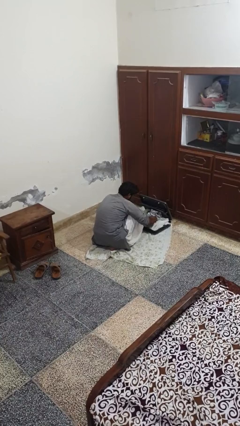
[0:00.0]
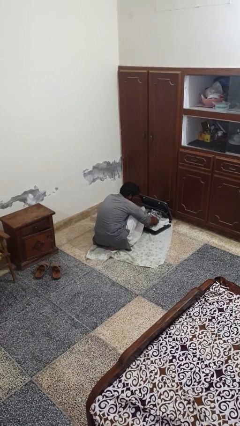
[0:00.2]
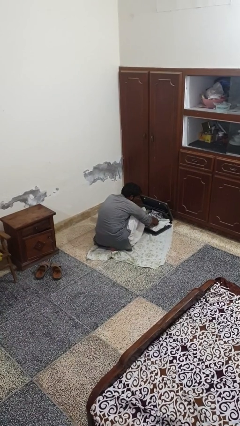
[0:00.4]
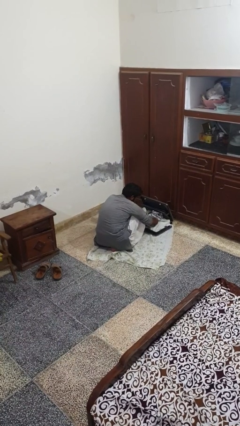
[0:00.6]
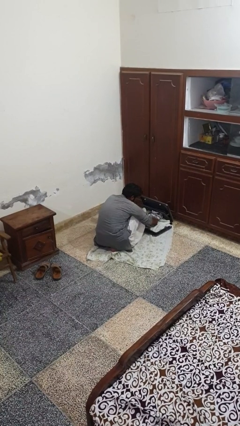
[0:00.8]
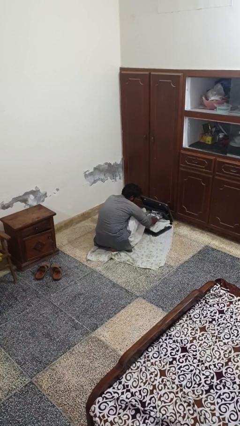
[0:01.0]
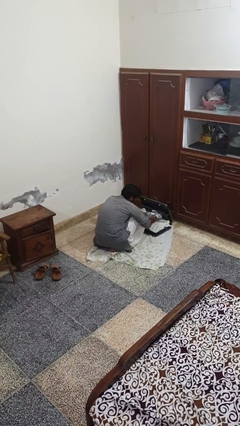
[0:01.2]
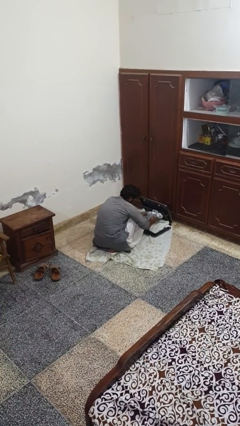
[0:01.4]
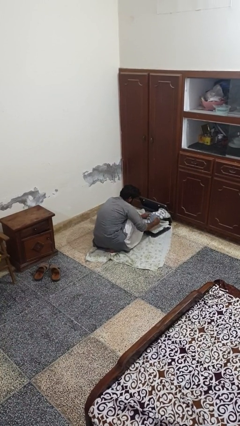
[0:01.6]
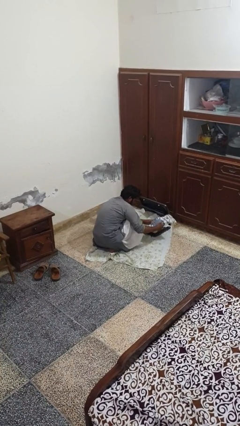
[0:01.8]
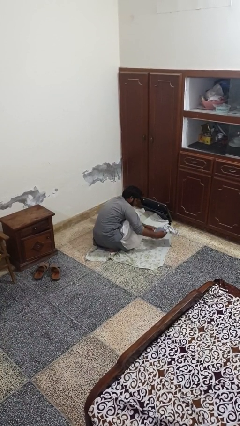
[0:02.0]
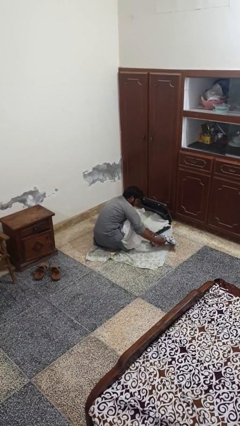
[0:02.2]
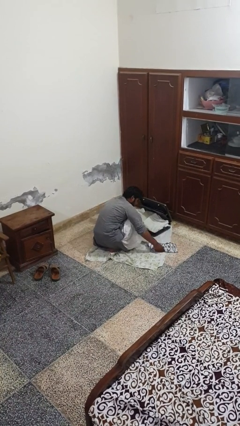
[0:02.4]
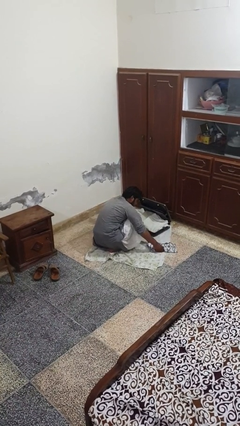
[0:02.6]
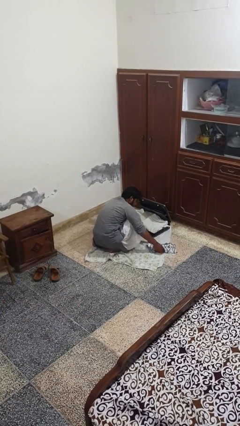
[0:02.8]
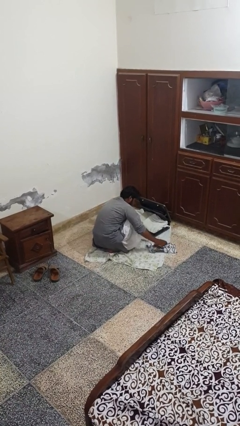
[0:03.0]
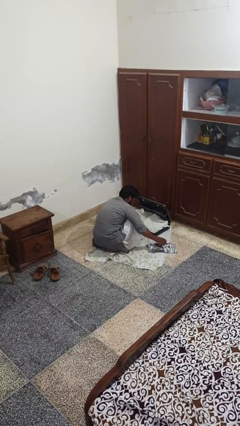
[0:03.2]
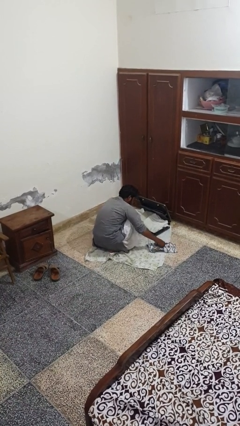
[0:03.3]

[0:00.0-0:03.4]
person unloads clothes from suitcase

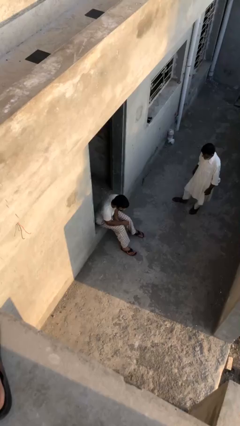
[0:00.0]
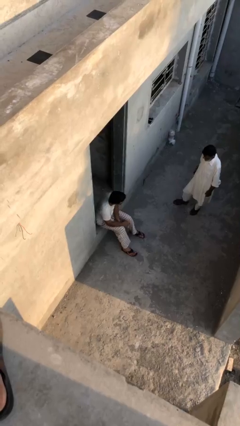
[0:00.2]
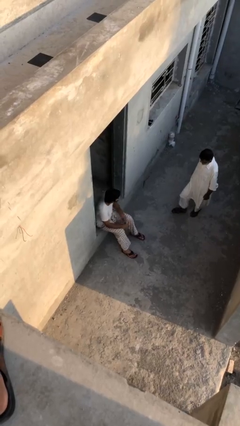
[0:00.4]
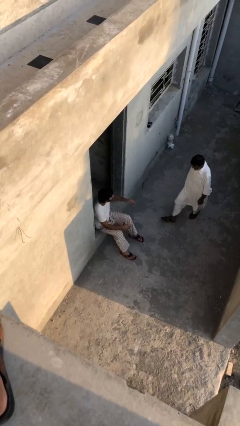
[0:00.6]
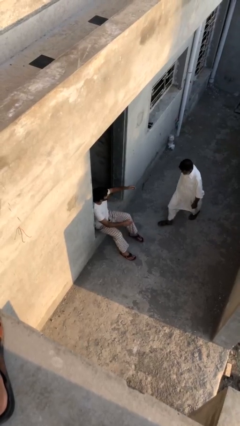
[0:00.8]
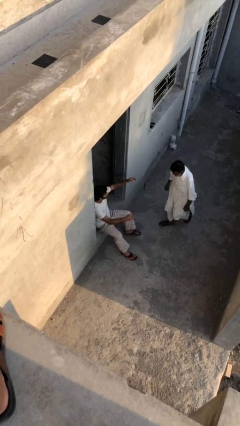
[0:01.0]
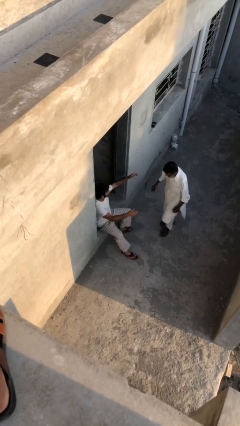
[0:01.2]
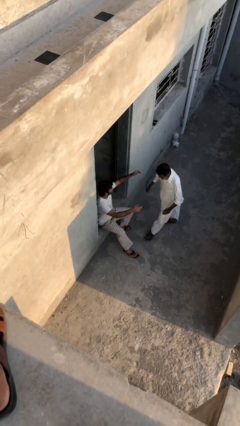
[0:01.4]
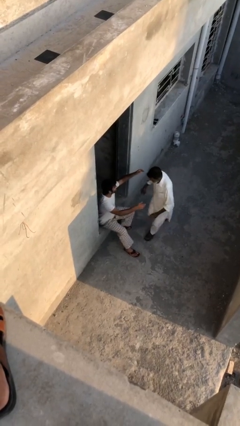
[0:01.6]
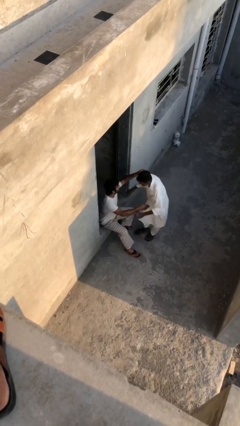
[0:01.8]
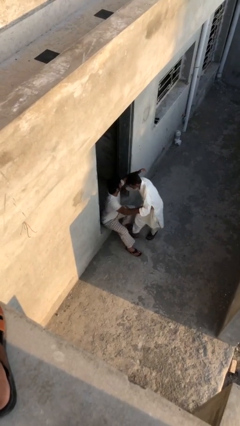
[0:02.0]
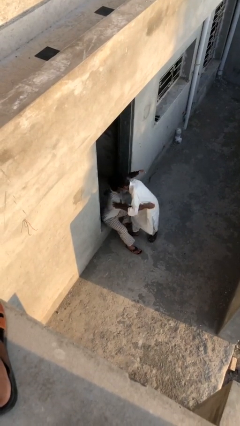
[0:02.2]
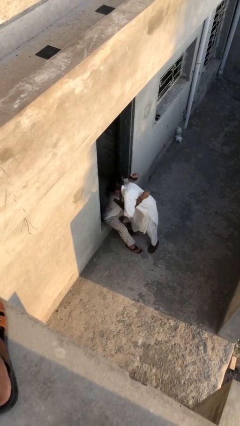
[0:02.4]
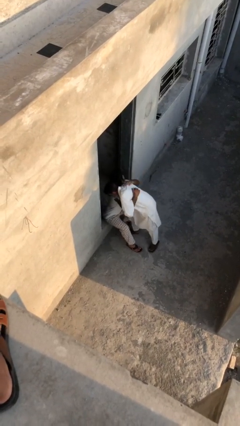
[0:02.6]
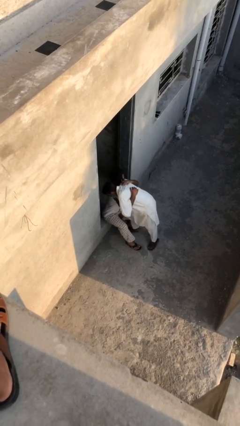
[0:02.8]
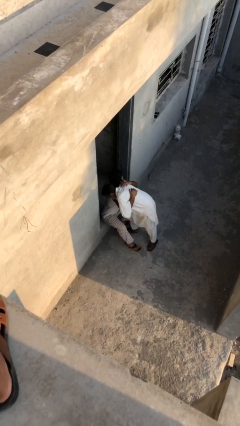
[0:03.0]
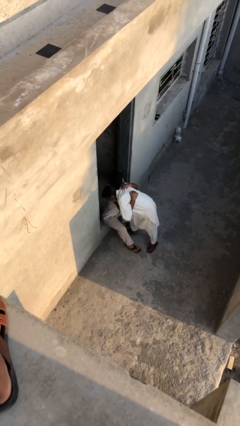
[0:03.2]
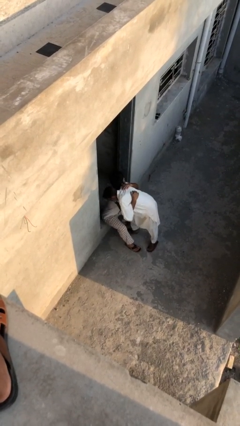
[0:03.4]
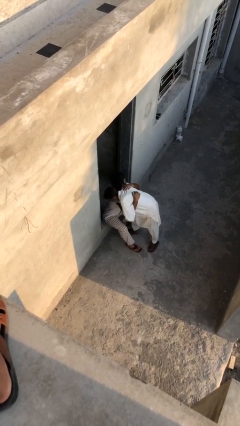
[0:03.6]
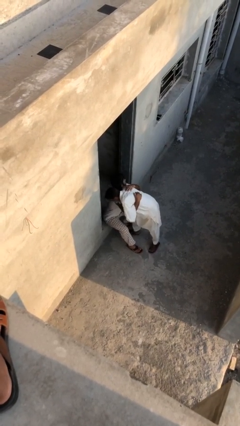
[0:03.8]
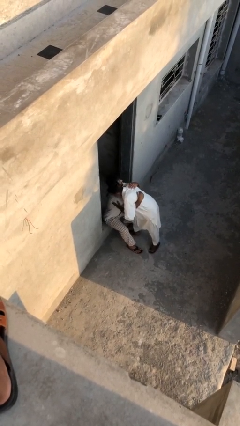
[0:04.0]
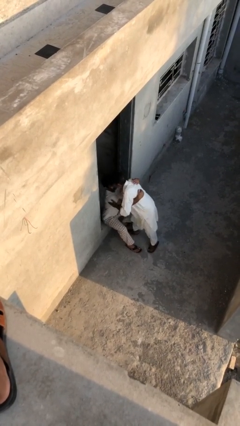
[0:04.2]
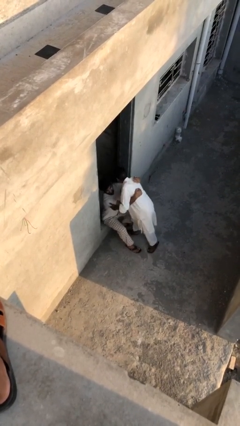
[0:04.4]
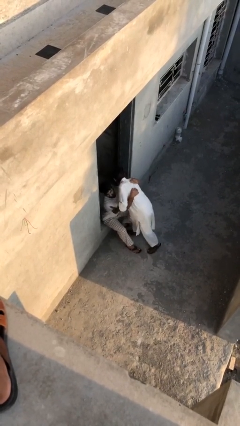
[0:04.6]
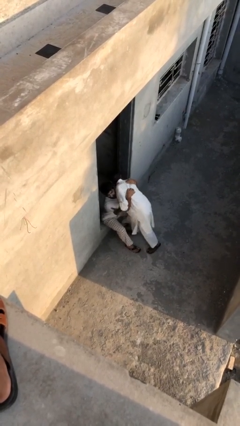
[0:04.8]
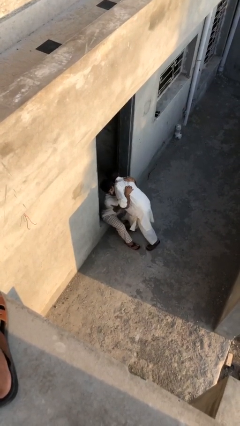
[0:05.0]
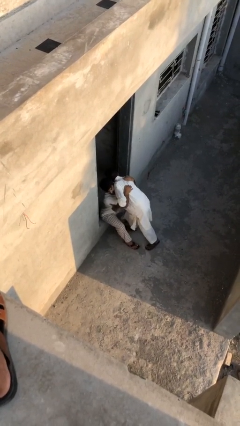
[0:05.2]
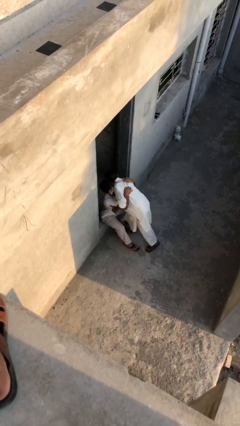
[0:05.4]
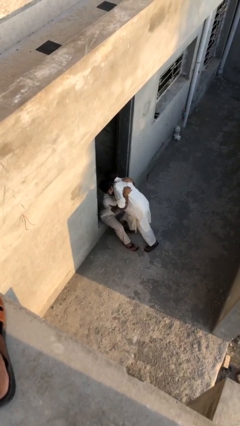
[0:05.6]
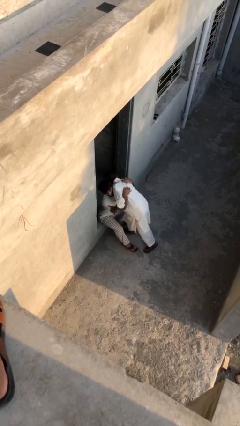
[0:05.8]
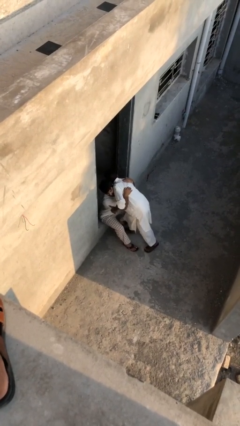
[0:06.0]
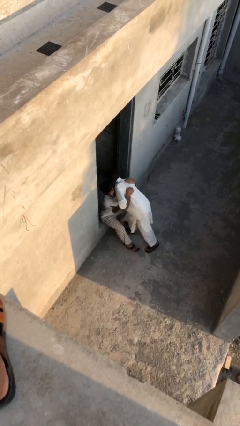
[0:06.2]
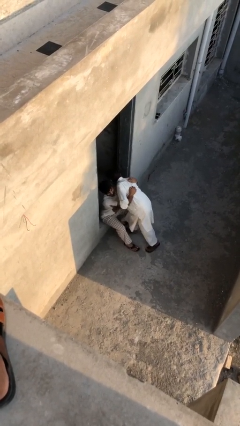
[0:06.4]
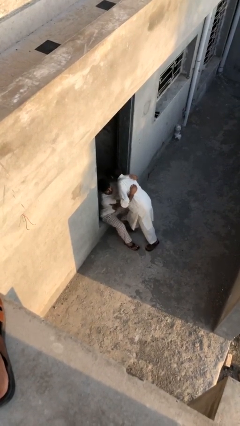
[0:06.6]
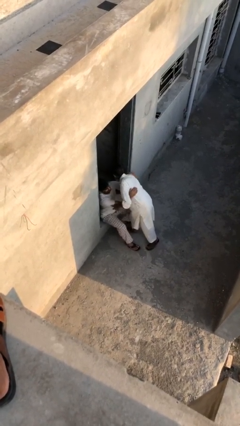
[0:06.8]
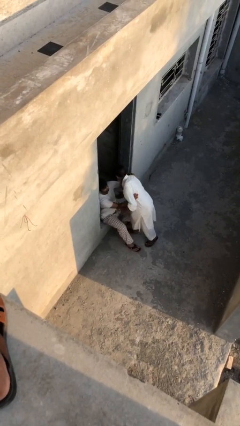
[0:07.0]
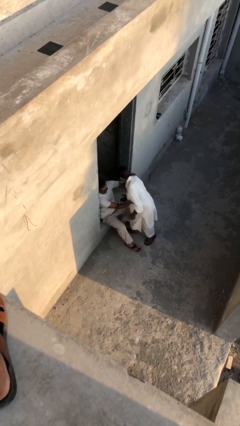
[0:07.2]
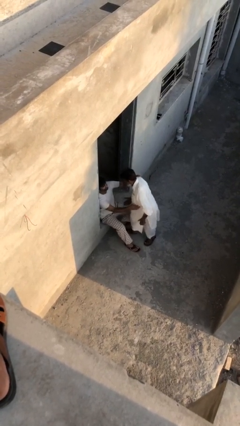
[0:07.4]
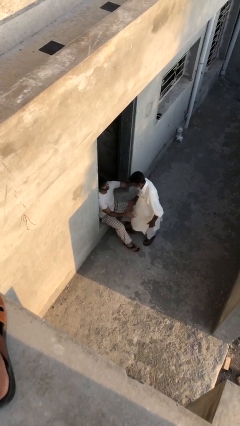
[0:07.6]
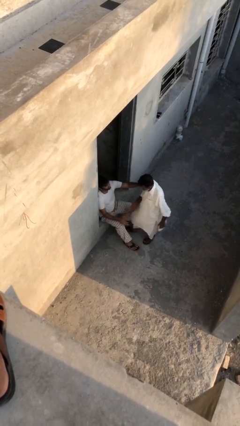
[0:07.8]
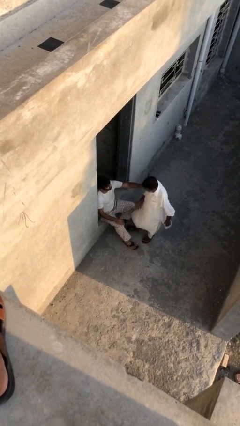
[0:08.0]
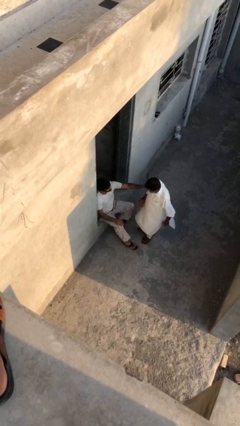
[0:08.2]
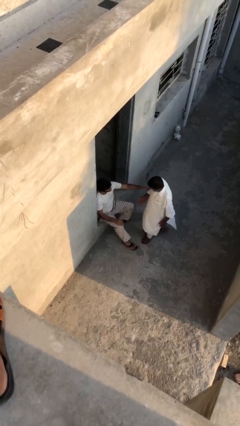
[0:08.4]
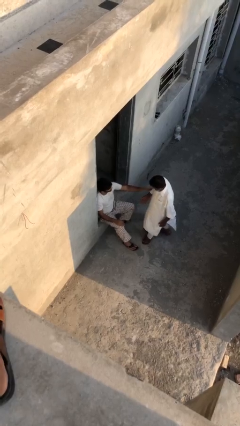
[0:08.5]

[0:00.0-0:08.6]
person embraces person

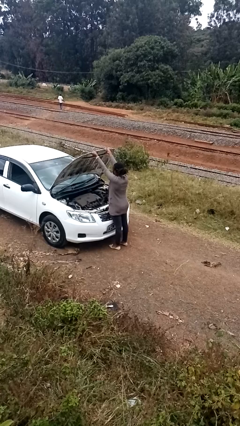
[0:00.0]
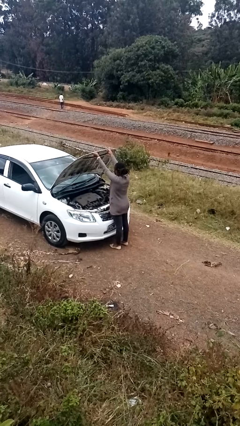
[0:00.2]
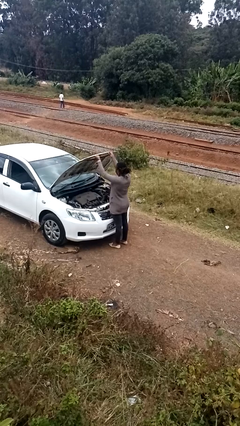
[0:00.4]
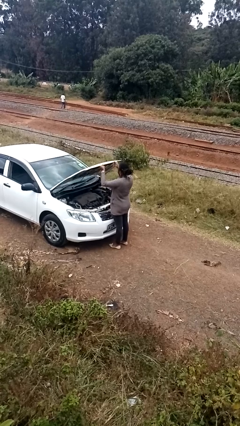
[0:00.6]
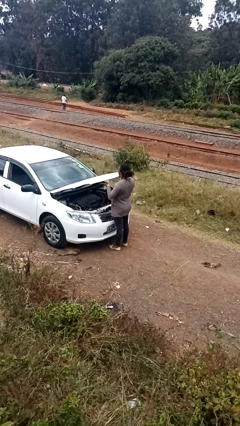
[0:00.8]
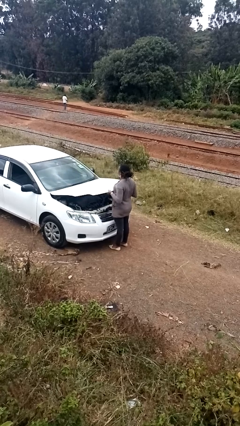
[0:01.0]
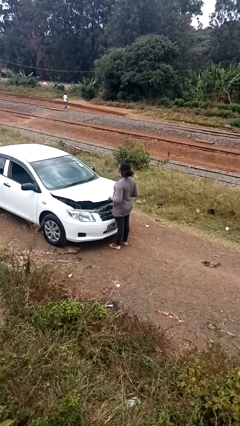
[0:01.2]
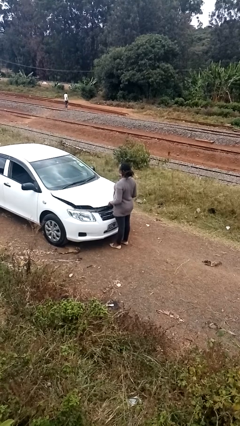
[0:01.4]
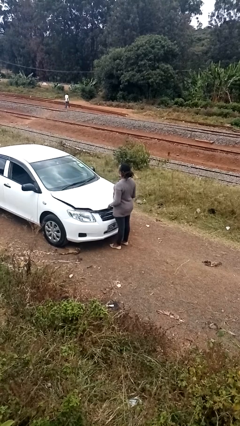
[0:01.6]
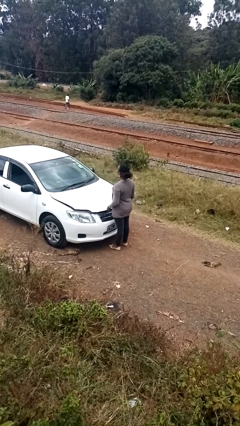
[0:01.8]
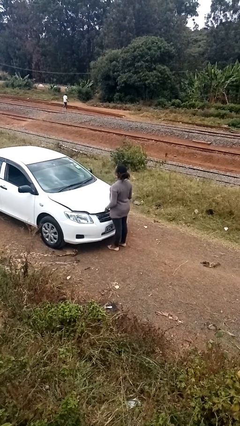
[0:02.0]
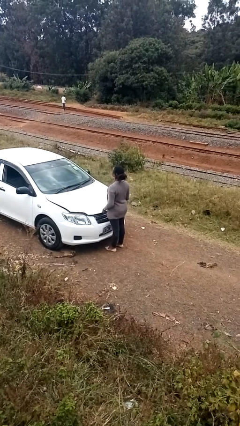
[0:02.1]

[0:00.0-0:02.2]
person closes car hood

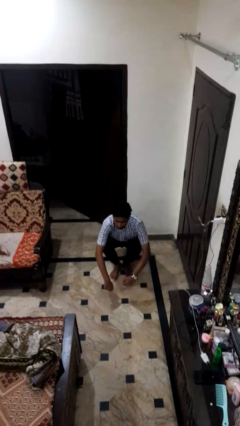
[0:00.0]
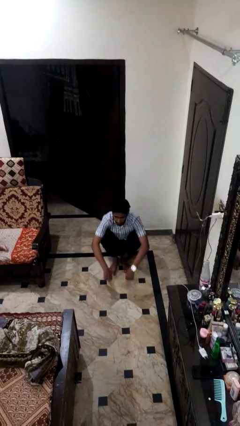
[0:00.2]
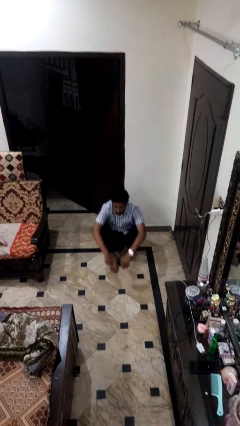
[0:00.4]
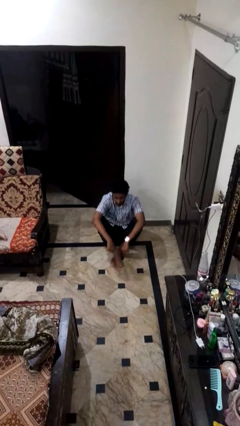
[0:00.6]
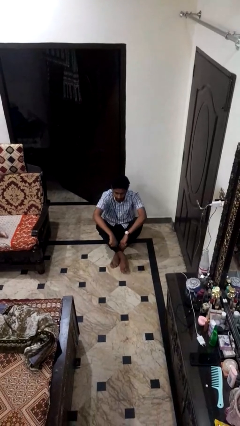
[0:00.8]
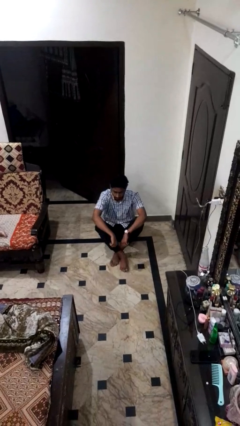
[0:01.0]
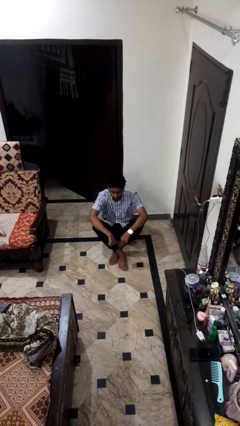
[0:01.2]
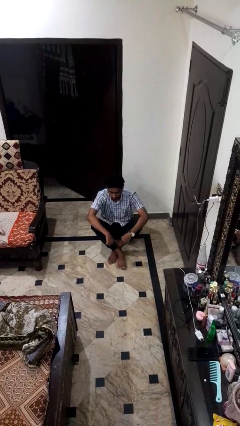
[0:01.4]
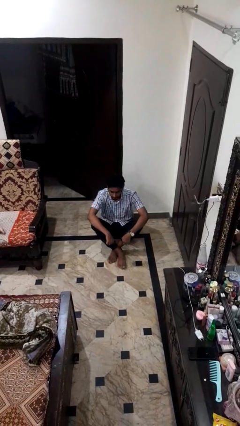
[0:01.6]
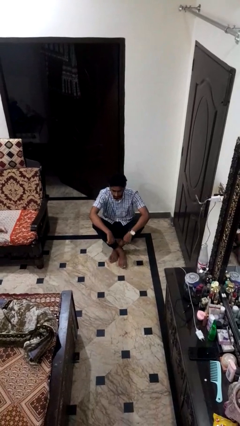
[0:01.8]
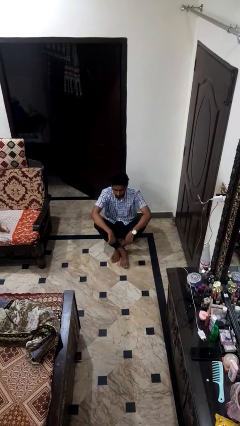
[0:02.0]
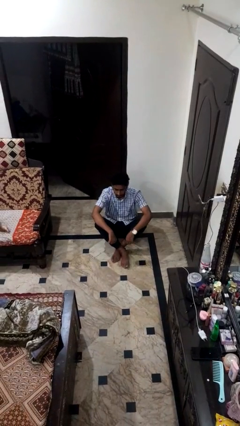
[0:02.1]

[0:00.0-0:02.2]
person sits crisscross

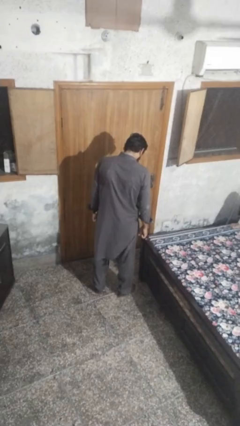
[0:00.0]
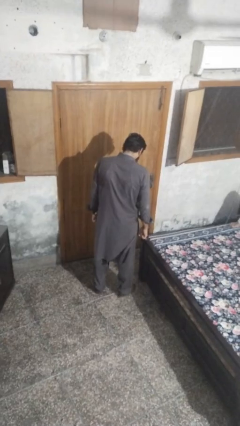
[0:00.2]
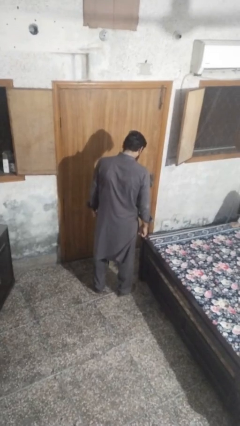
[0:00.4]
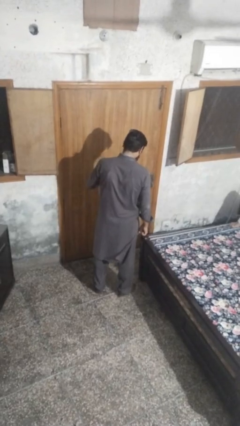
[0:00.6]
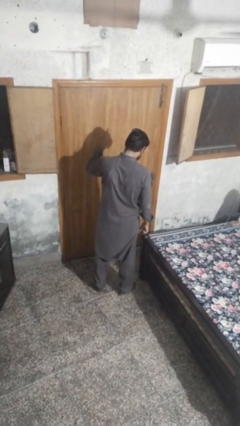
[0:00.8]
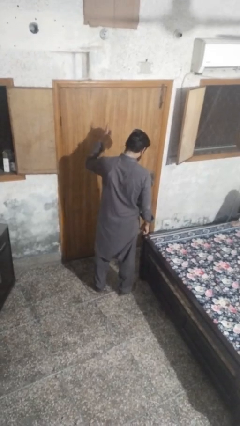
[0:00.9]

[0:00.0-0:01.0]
person gestures number one

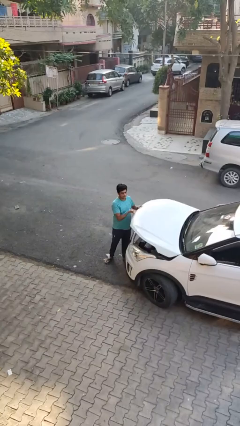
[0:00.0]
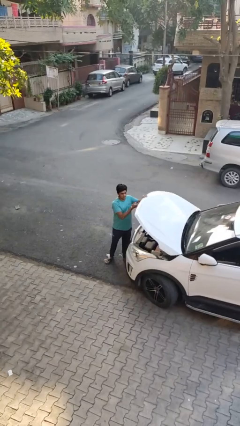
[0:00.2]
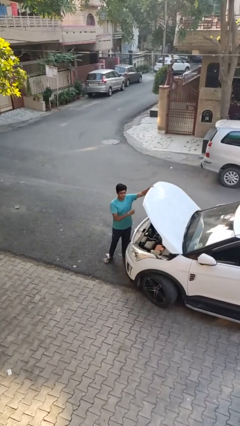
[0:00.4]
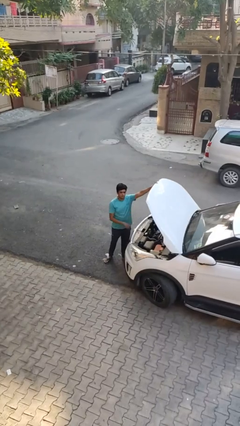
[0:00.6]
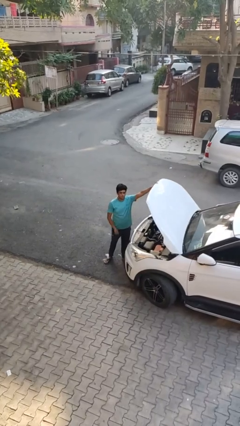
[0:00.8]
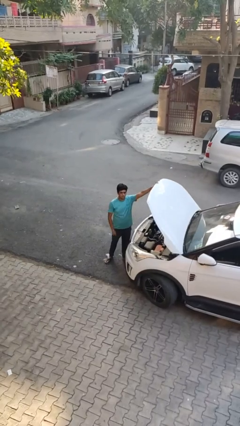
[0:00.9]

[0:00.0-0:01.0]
person opens car hood
